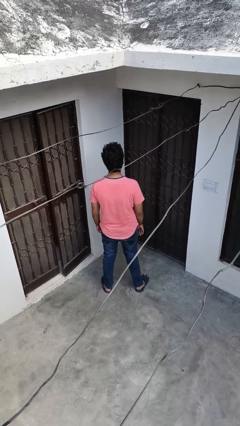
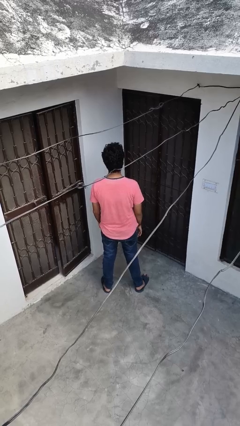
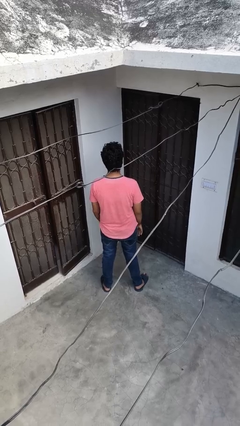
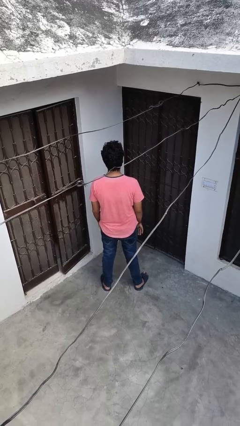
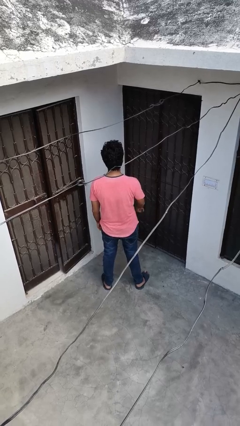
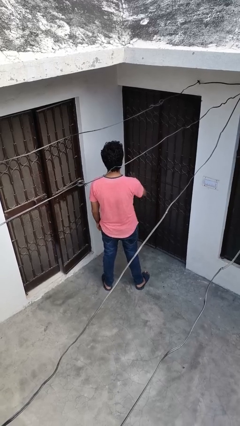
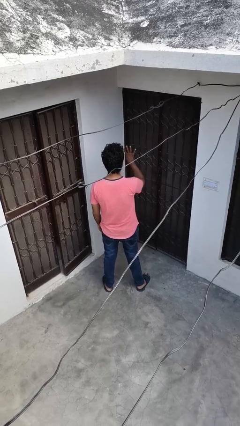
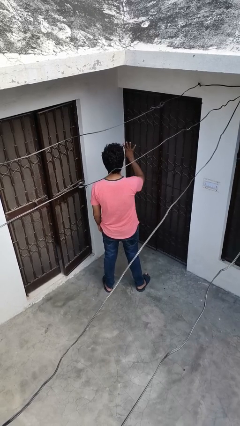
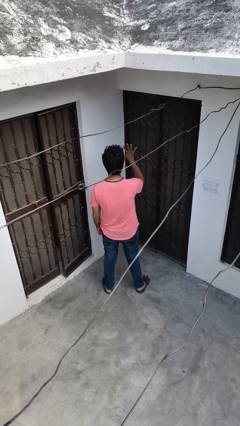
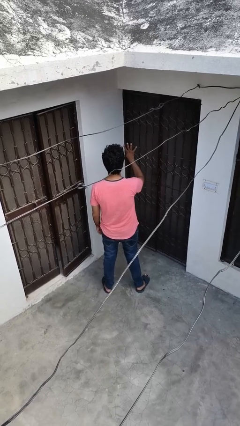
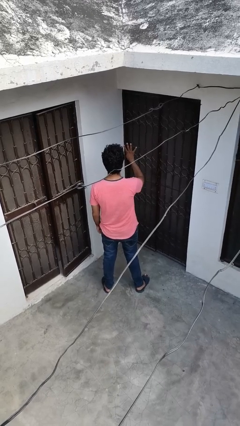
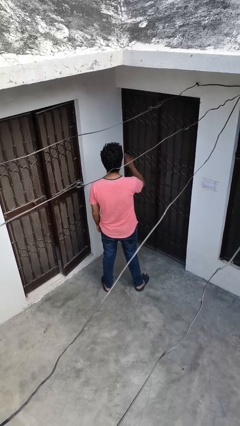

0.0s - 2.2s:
person gestures number four

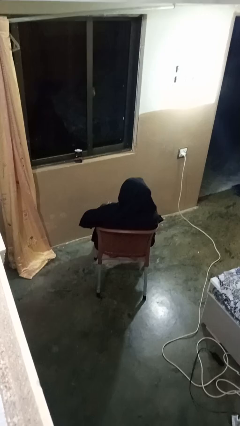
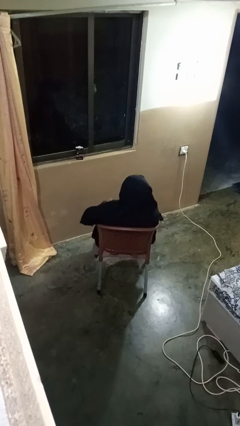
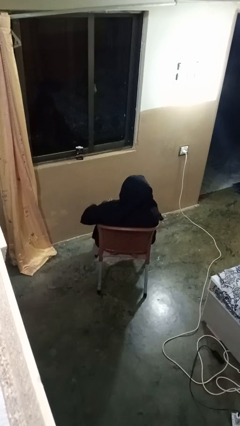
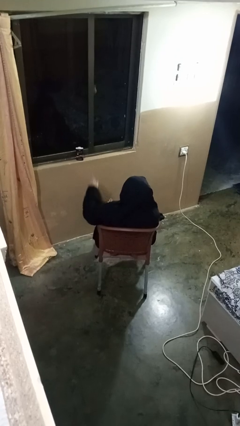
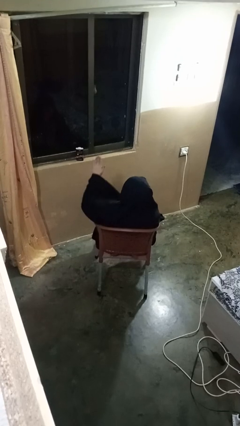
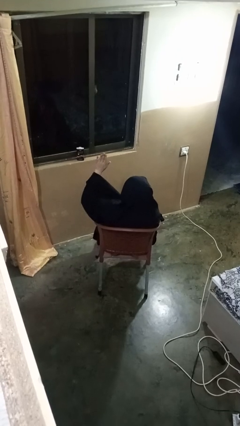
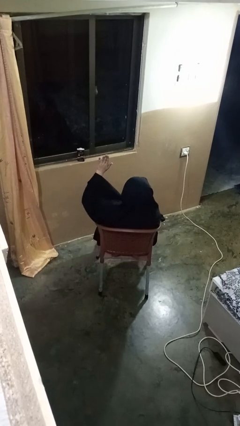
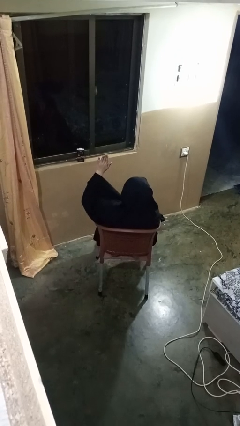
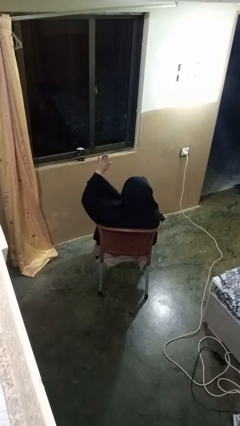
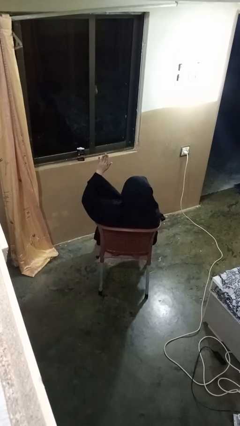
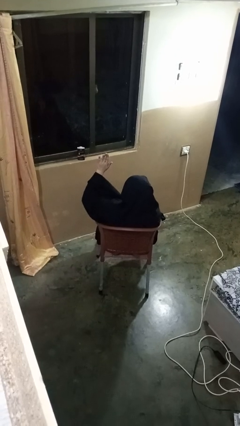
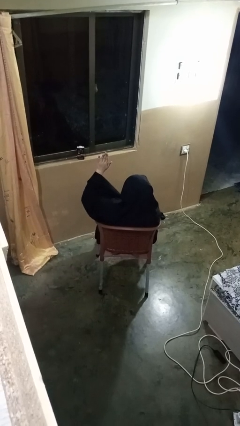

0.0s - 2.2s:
person gestures raise hand

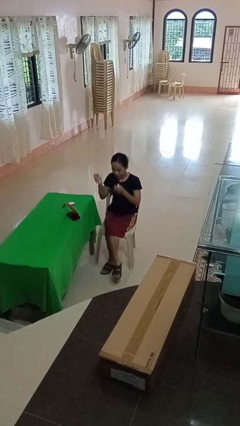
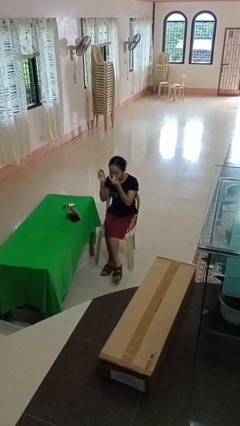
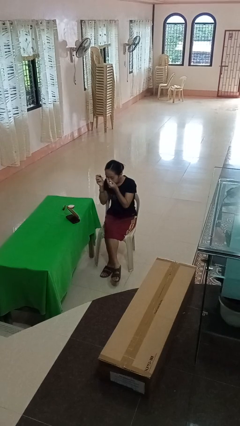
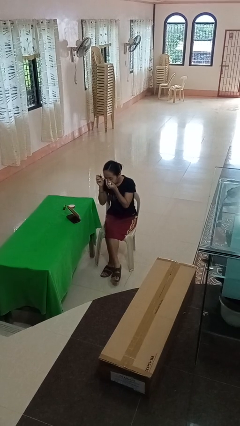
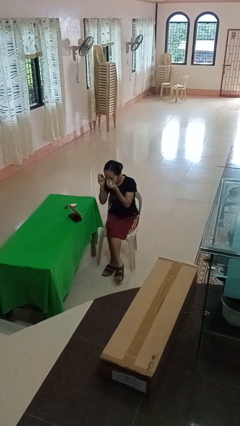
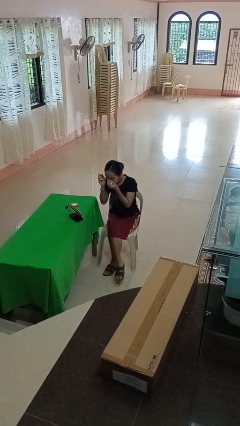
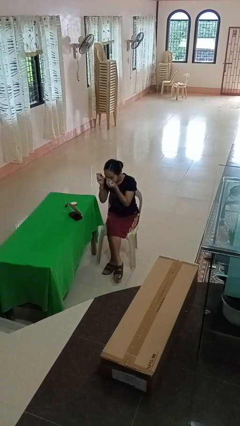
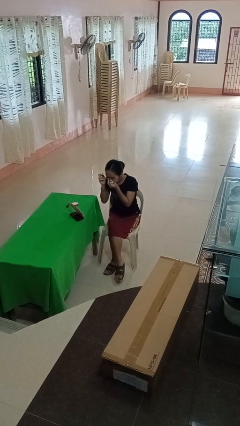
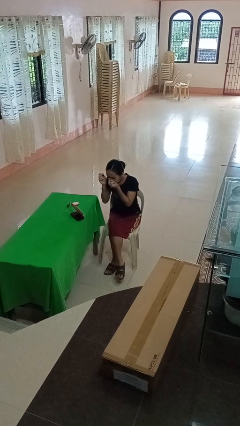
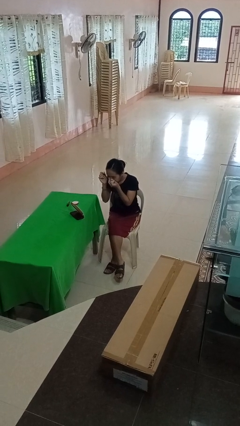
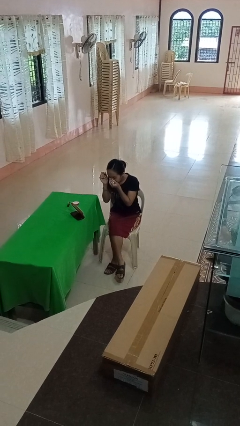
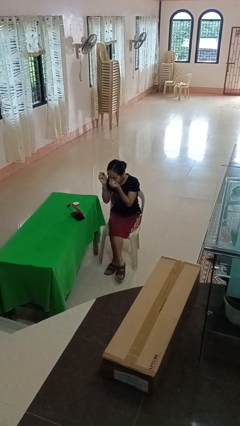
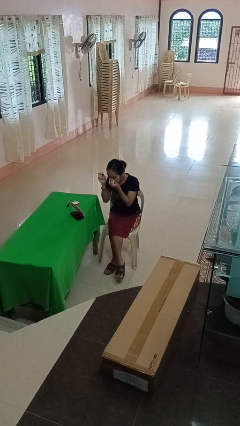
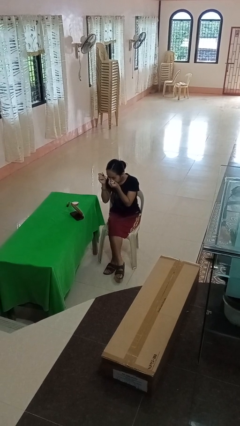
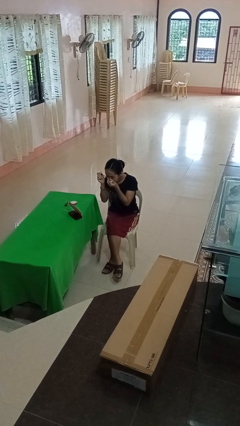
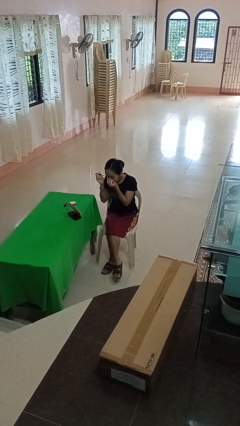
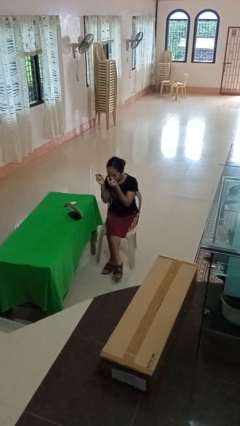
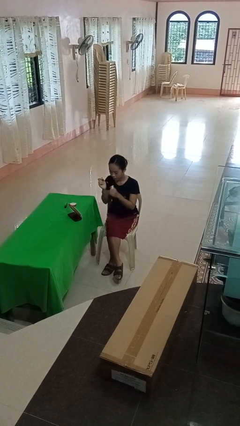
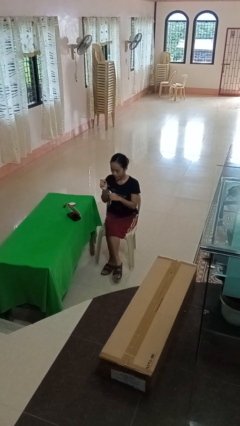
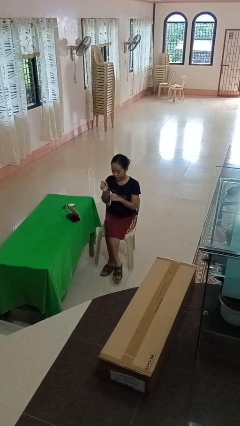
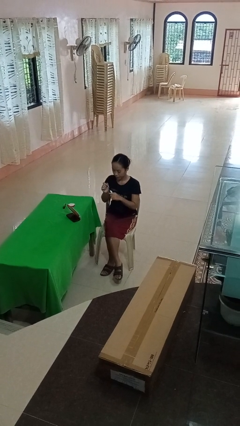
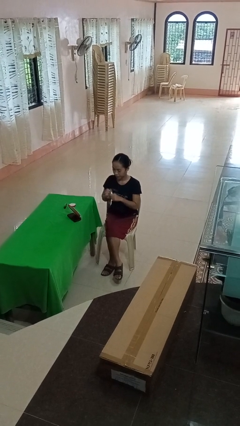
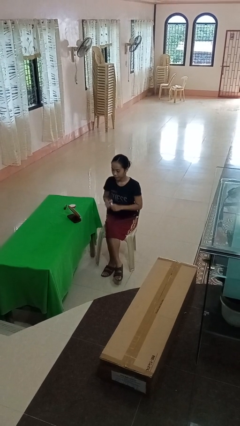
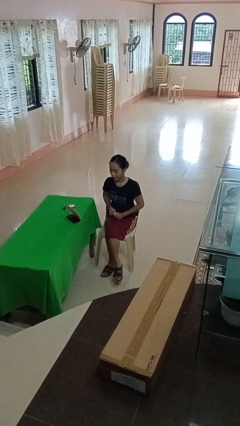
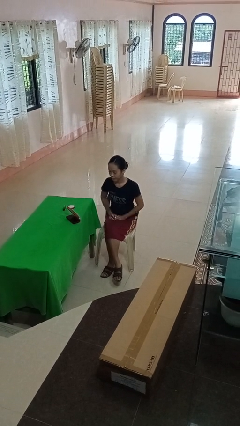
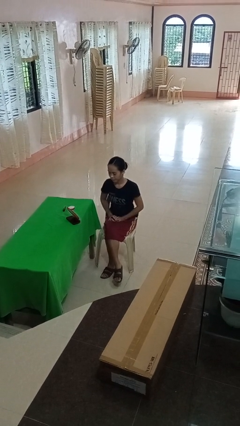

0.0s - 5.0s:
person applies eye makeup

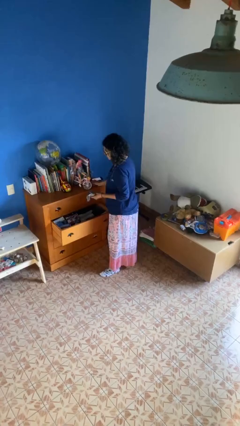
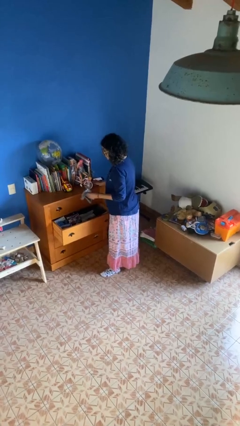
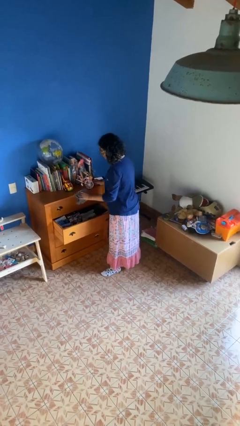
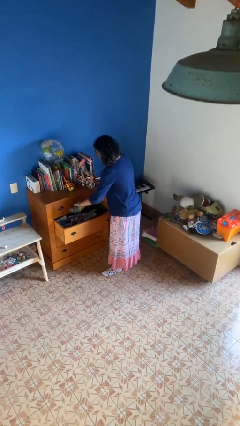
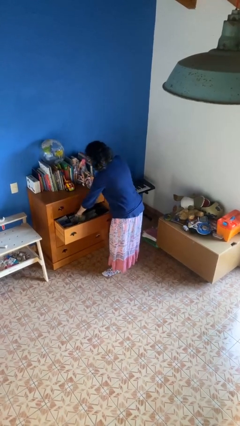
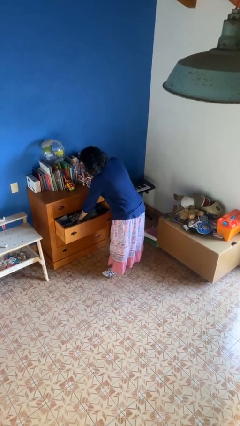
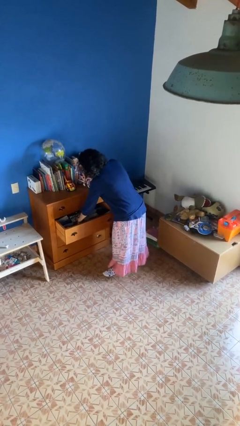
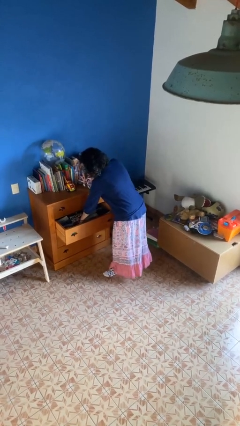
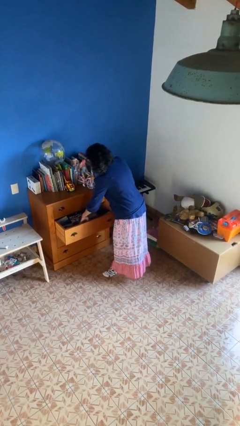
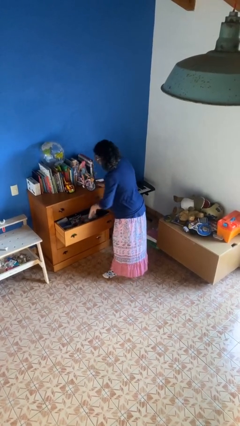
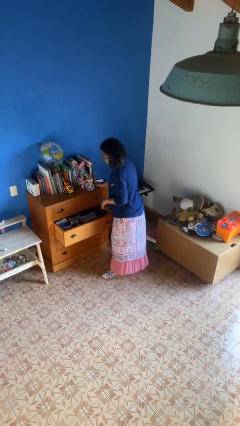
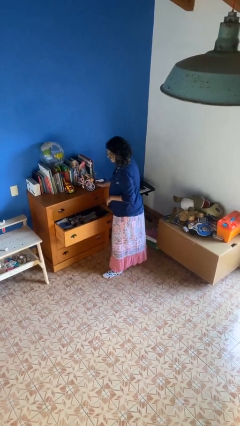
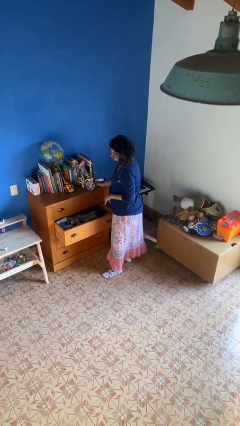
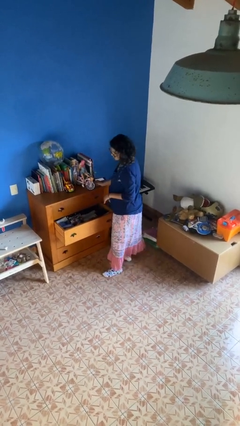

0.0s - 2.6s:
person puts clothes into dresser

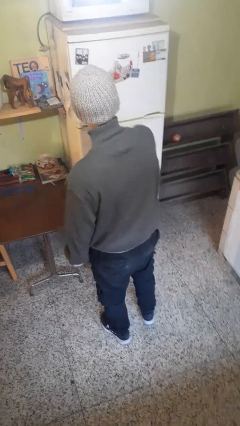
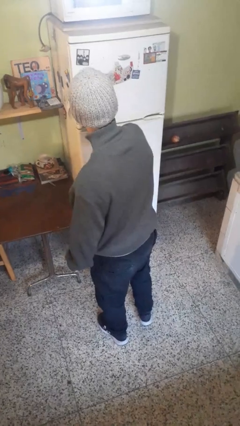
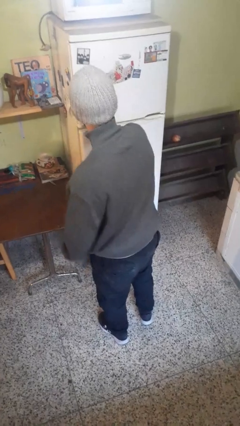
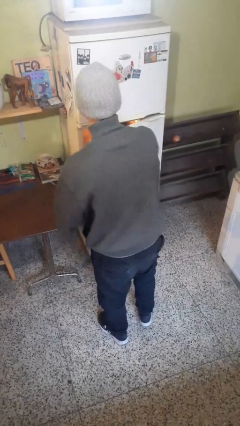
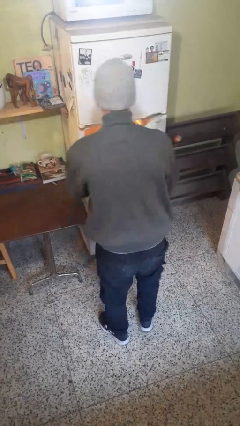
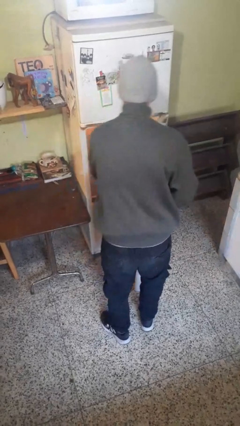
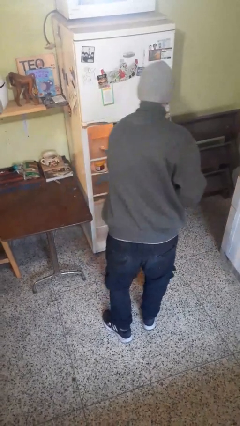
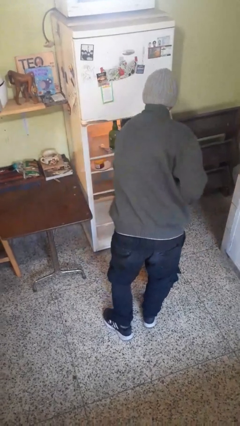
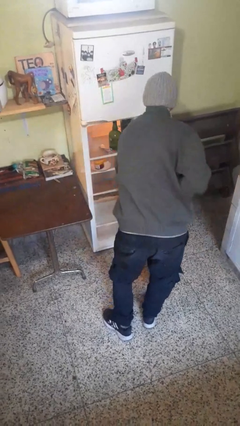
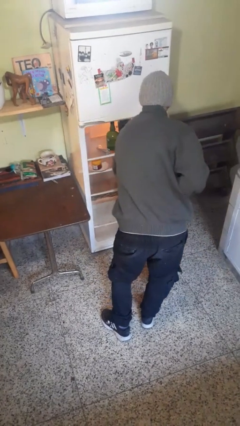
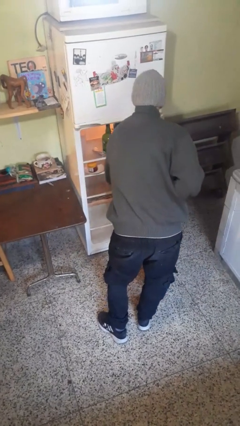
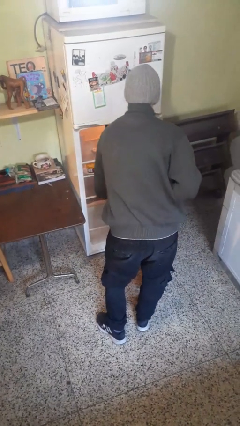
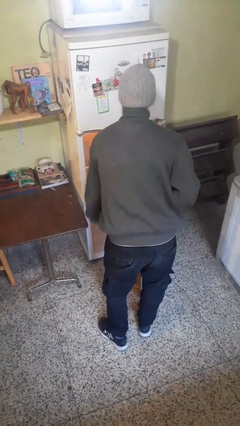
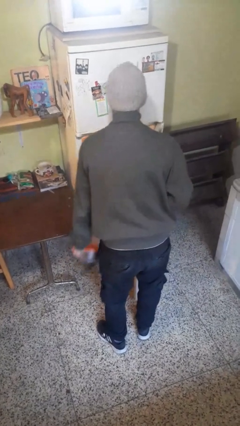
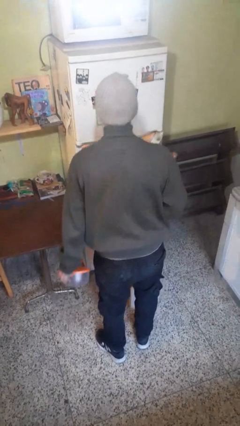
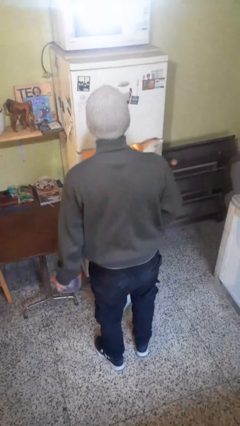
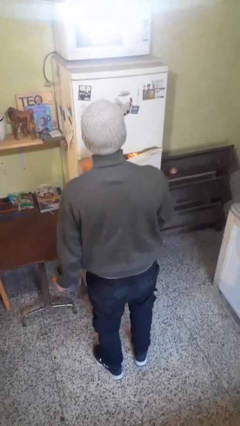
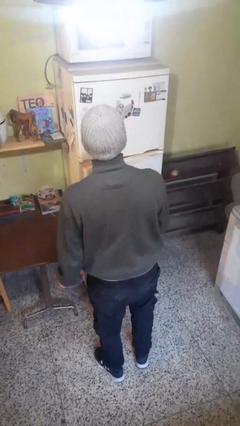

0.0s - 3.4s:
person takes object from refrigerator

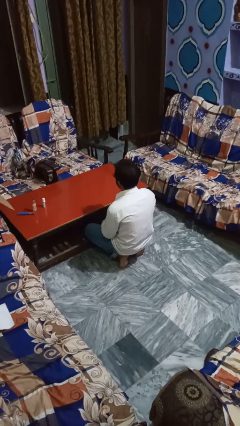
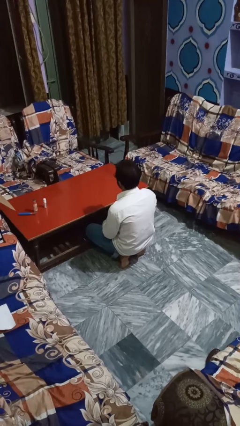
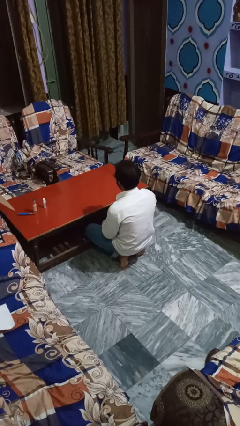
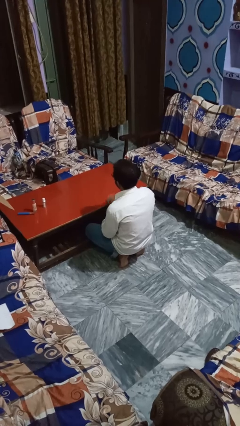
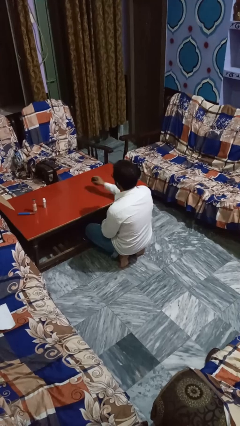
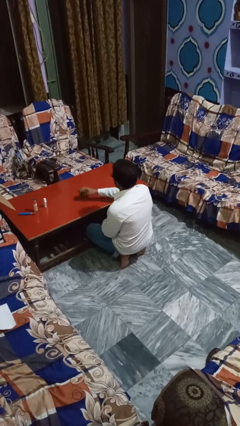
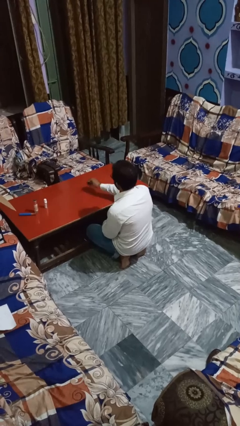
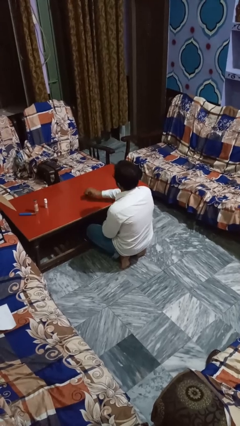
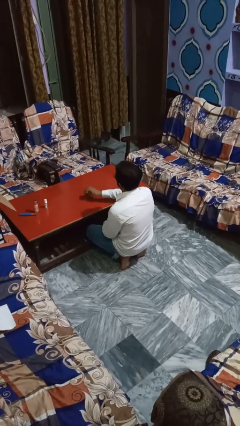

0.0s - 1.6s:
person cleans table with rag

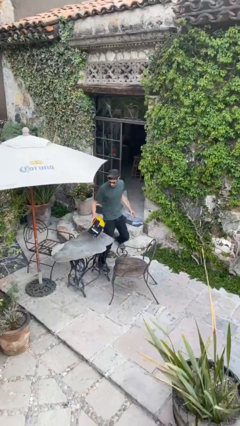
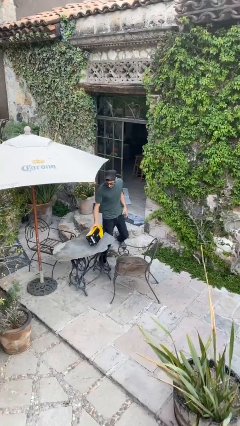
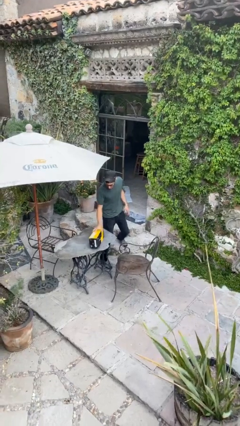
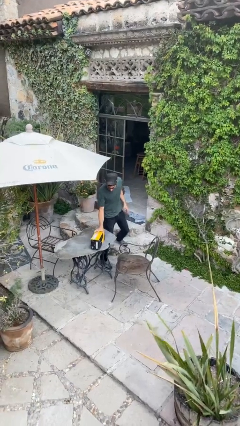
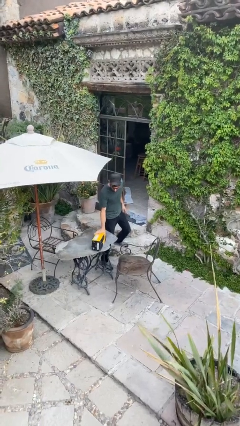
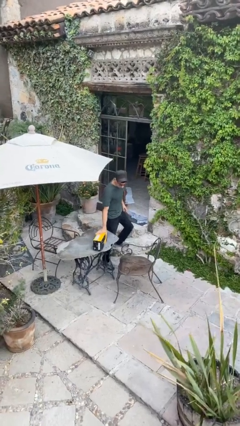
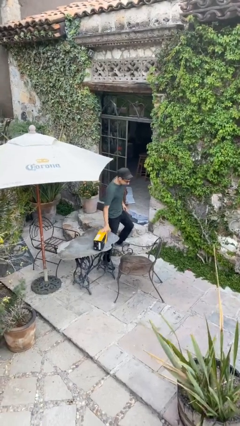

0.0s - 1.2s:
person puts down object on table
